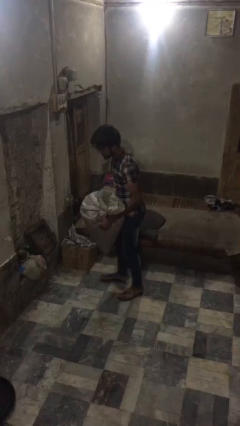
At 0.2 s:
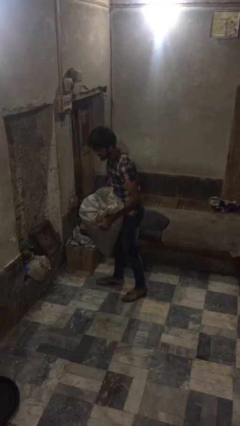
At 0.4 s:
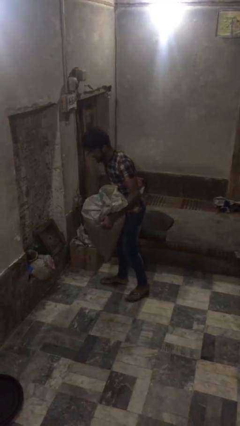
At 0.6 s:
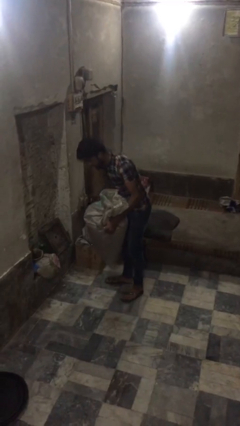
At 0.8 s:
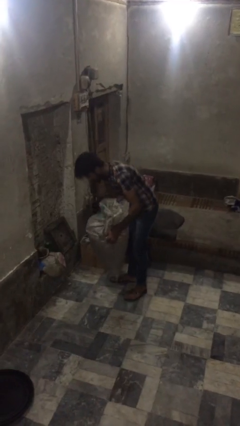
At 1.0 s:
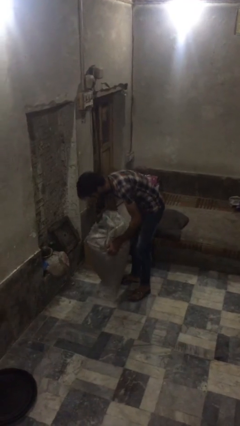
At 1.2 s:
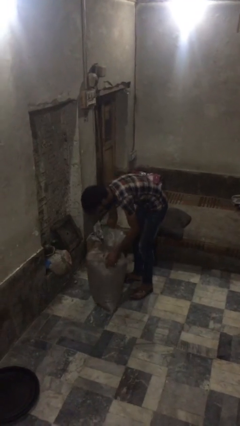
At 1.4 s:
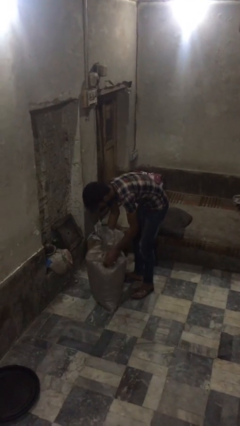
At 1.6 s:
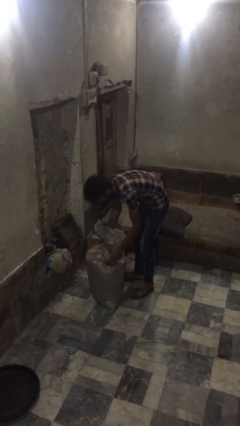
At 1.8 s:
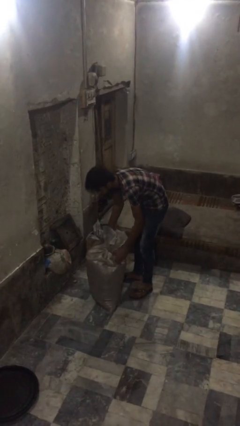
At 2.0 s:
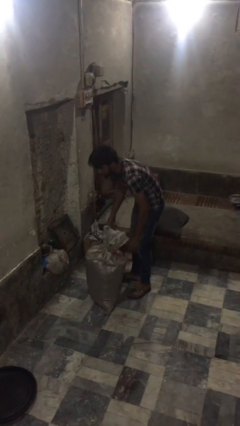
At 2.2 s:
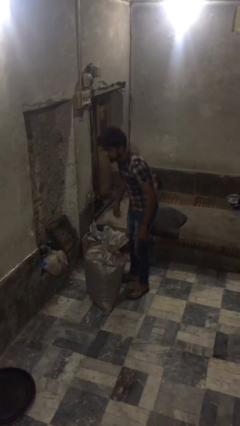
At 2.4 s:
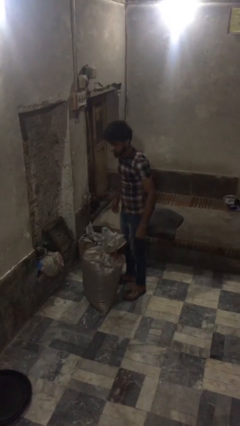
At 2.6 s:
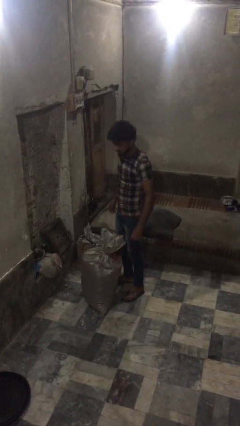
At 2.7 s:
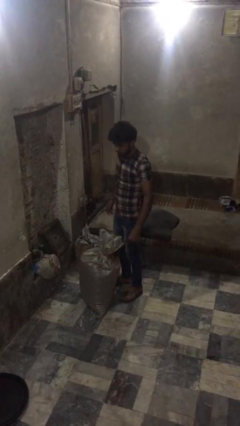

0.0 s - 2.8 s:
person puts down object on floor

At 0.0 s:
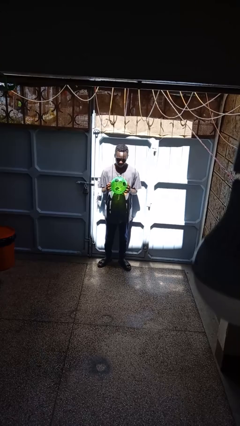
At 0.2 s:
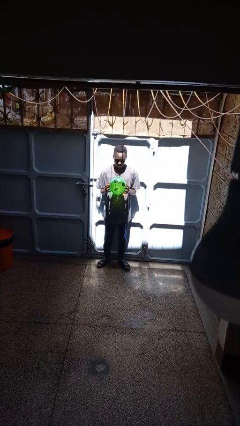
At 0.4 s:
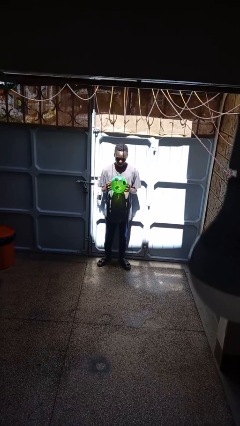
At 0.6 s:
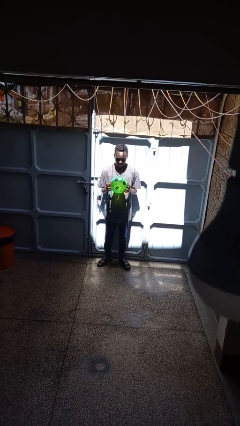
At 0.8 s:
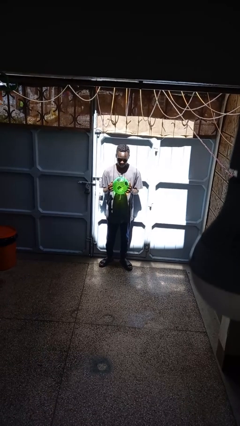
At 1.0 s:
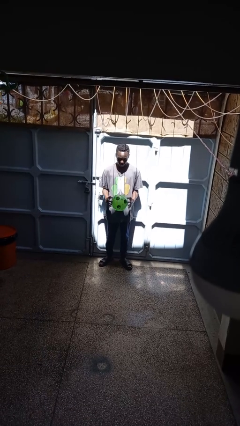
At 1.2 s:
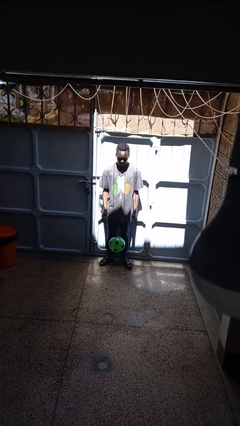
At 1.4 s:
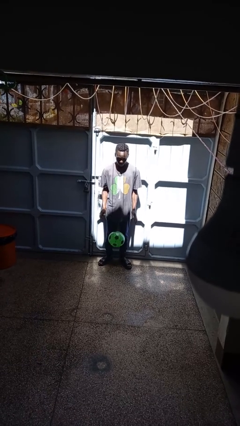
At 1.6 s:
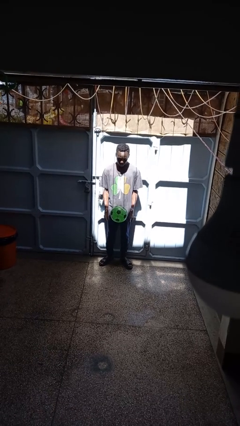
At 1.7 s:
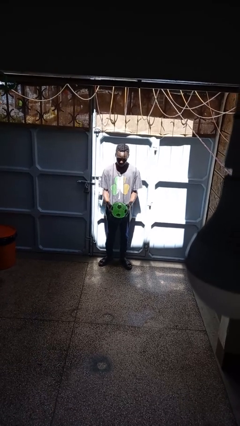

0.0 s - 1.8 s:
person bounces ball on floor

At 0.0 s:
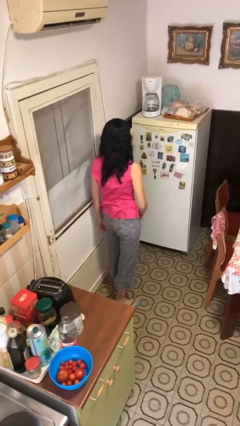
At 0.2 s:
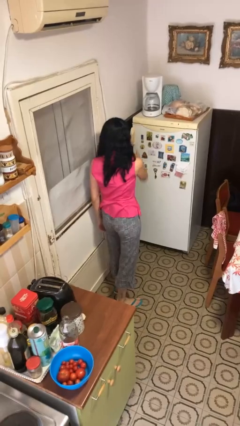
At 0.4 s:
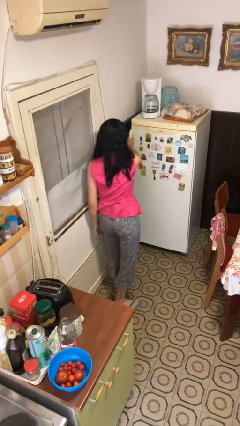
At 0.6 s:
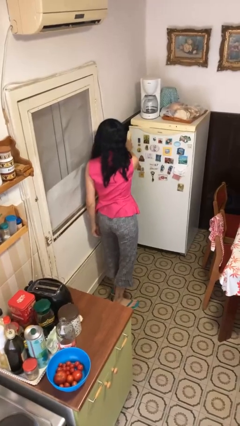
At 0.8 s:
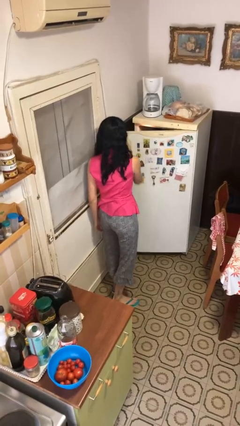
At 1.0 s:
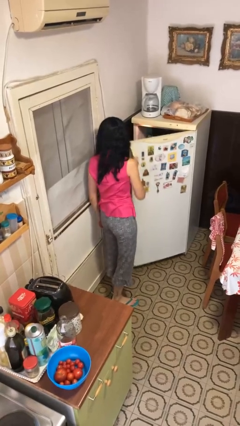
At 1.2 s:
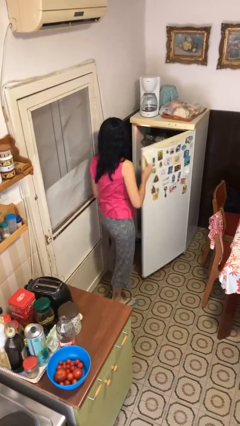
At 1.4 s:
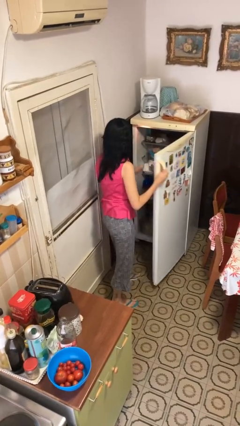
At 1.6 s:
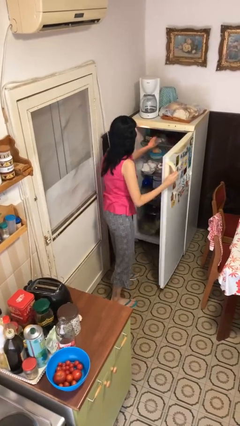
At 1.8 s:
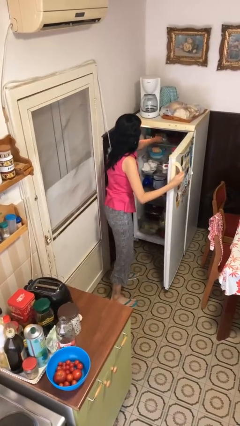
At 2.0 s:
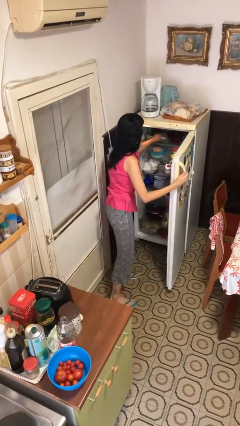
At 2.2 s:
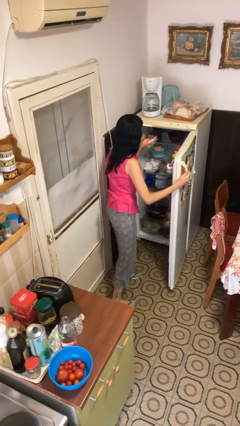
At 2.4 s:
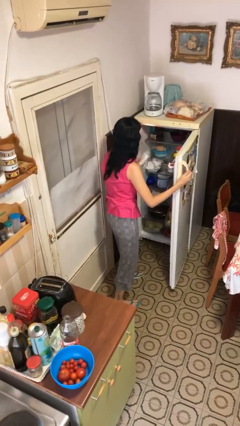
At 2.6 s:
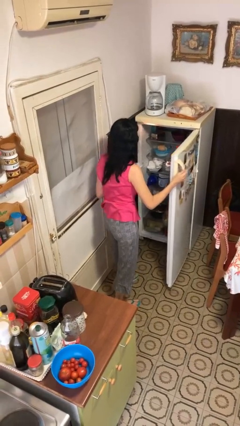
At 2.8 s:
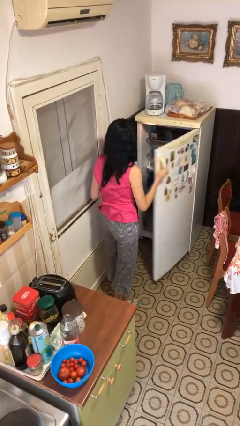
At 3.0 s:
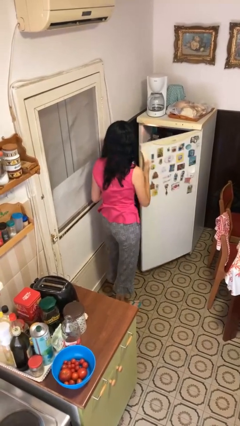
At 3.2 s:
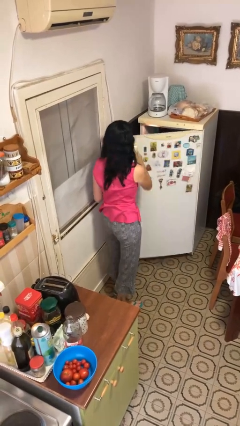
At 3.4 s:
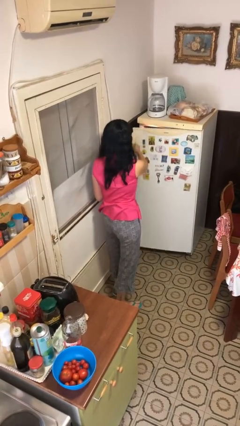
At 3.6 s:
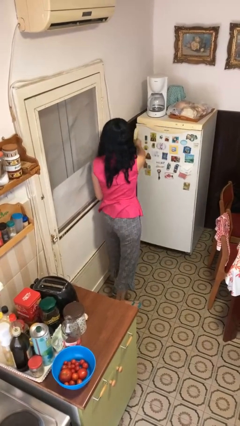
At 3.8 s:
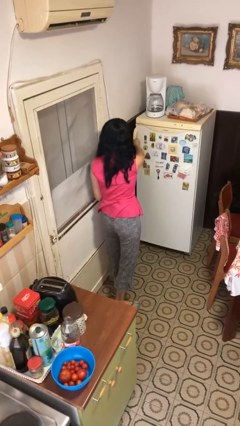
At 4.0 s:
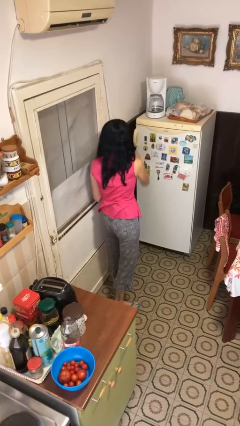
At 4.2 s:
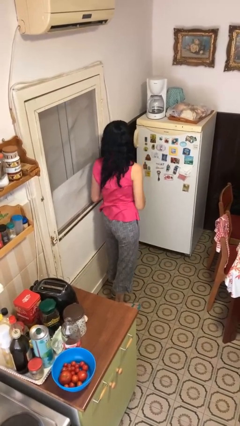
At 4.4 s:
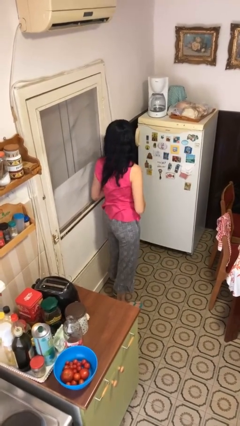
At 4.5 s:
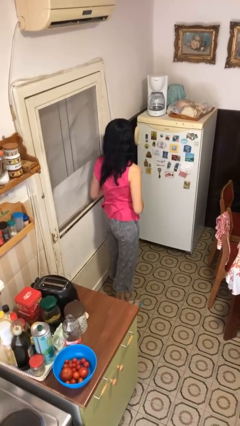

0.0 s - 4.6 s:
person takes object from refrigerator

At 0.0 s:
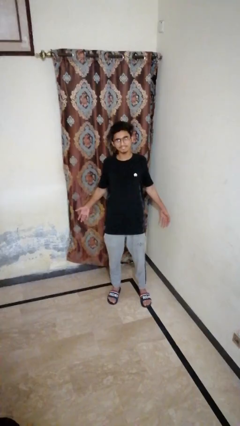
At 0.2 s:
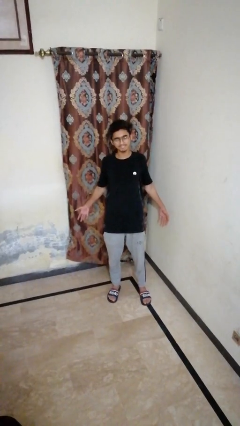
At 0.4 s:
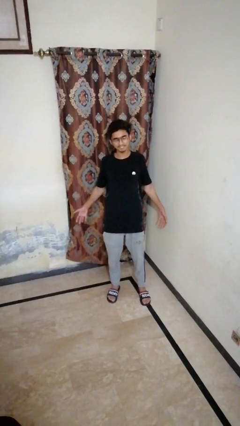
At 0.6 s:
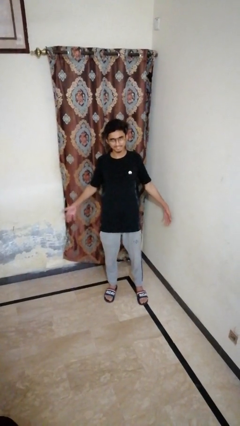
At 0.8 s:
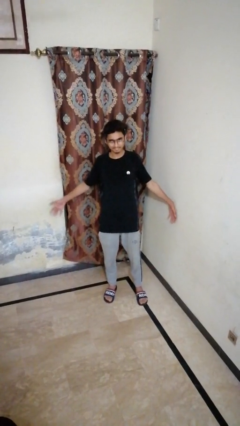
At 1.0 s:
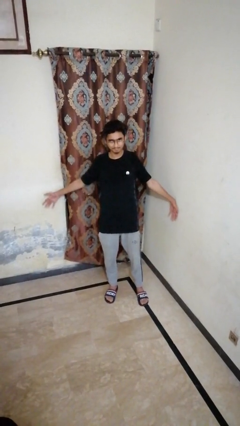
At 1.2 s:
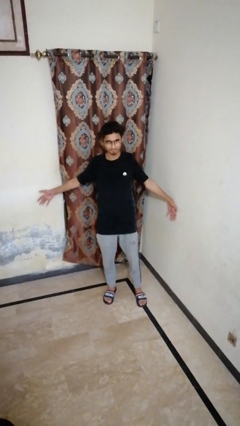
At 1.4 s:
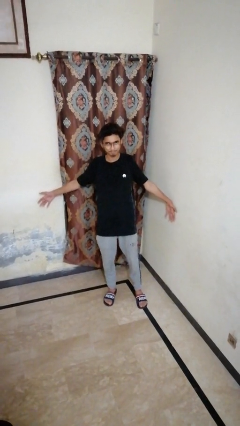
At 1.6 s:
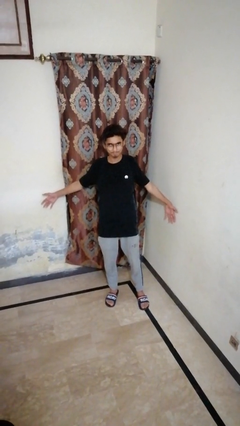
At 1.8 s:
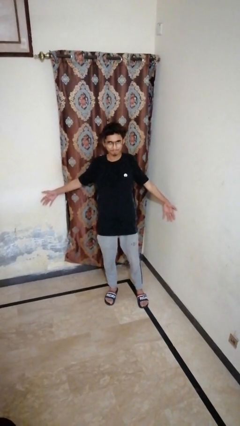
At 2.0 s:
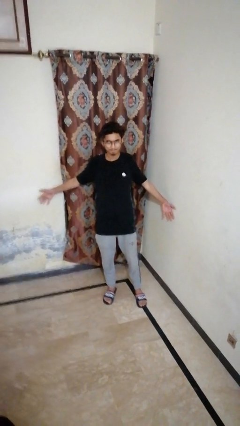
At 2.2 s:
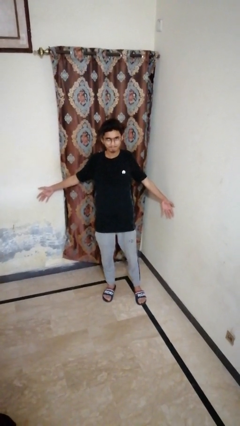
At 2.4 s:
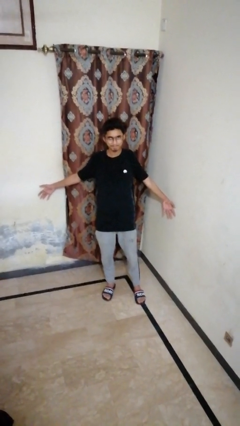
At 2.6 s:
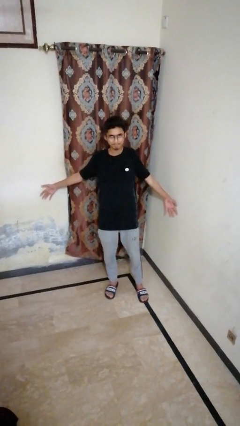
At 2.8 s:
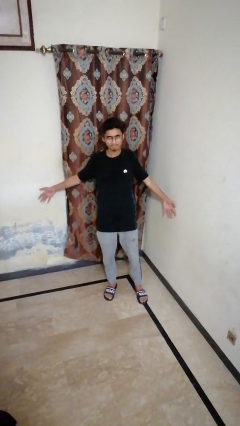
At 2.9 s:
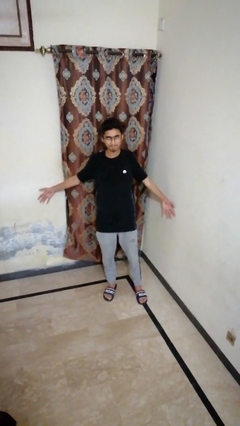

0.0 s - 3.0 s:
person stretches arms to side

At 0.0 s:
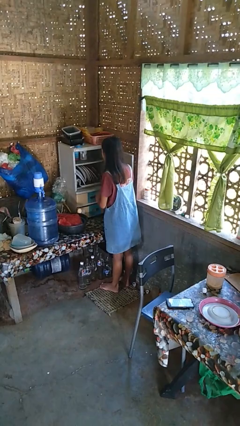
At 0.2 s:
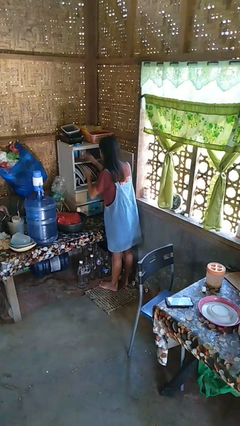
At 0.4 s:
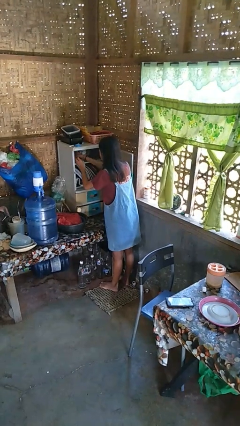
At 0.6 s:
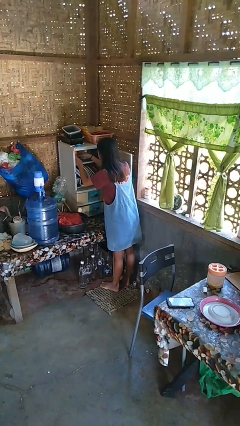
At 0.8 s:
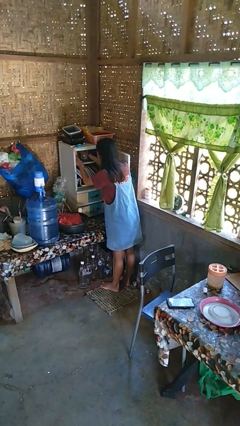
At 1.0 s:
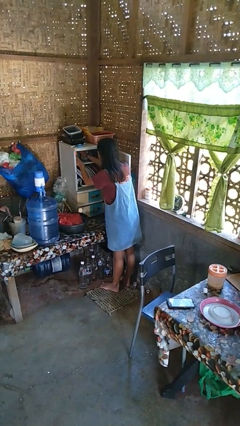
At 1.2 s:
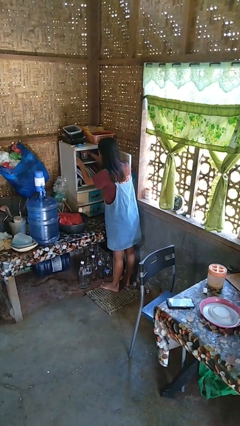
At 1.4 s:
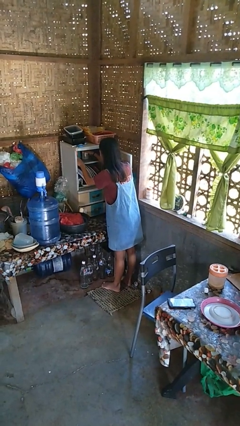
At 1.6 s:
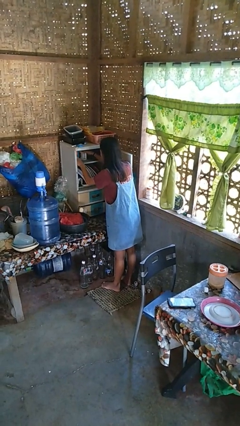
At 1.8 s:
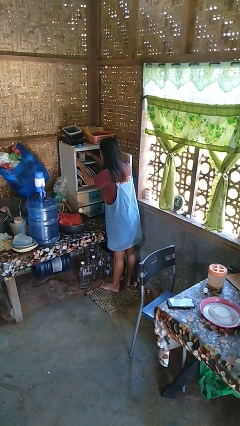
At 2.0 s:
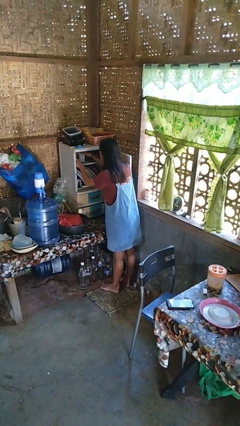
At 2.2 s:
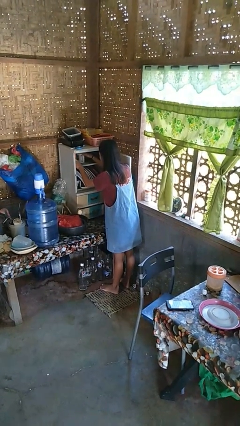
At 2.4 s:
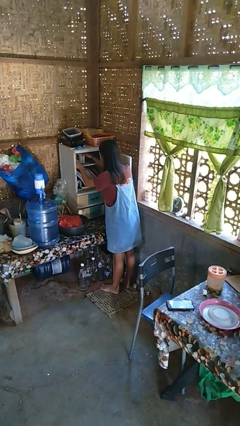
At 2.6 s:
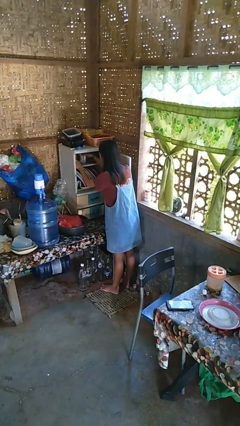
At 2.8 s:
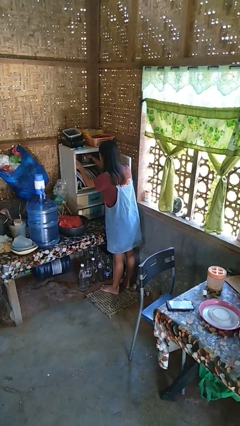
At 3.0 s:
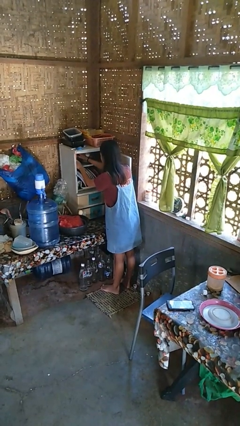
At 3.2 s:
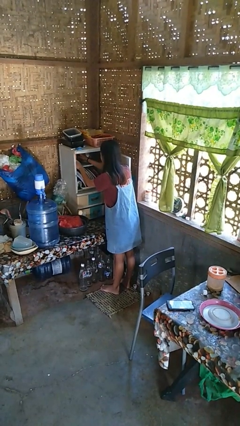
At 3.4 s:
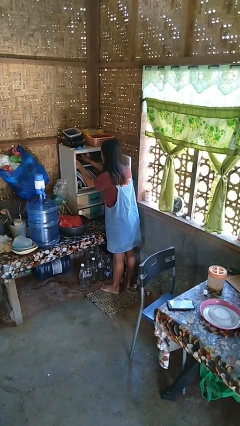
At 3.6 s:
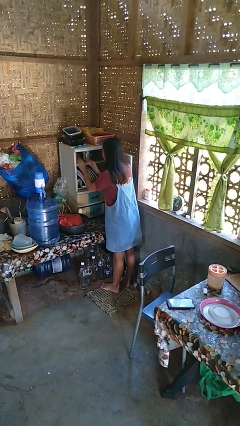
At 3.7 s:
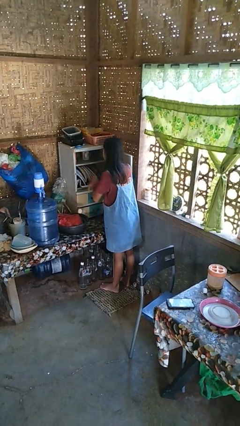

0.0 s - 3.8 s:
person searches in cabinet

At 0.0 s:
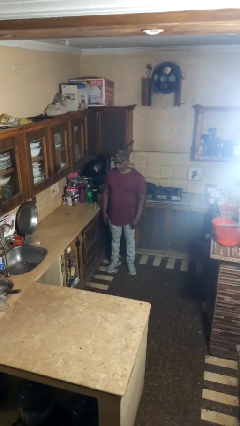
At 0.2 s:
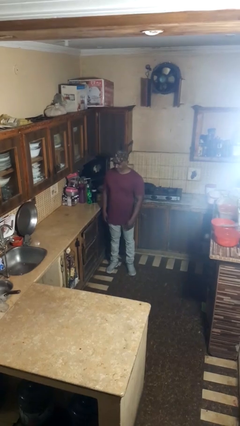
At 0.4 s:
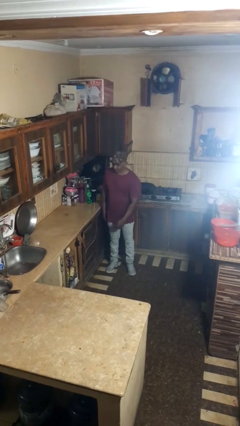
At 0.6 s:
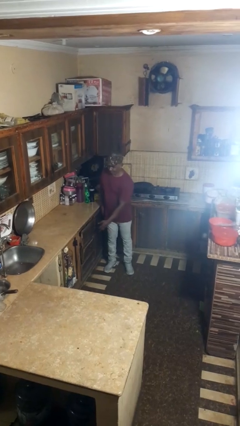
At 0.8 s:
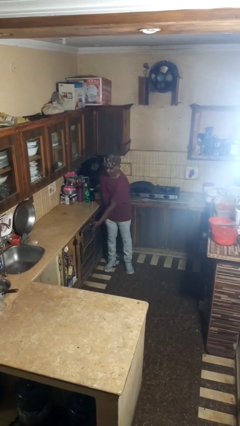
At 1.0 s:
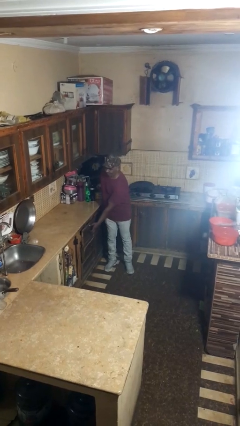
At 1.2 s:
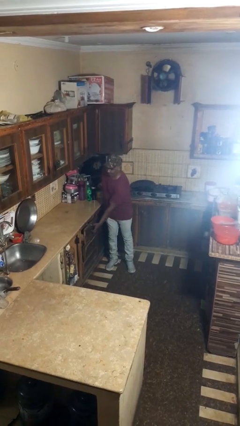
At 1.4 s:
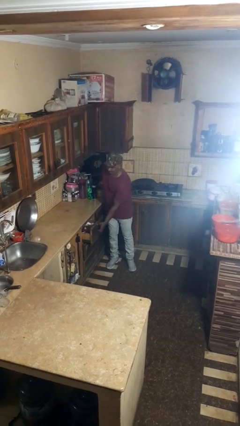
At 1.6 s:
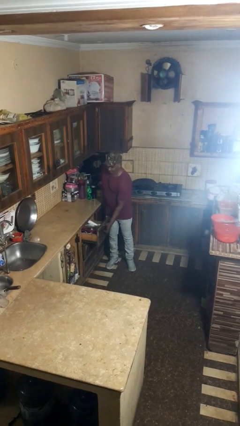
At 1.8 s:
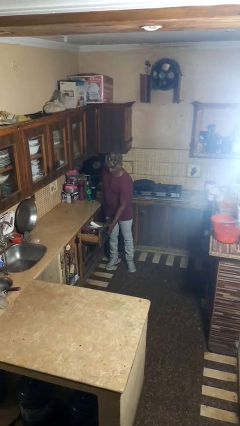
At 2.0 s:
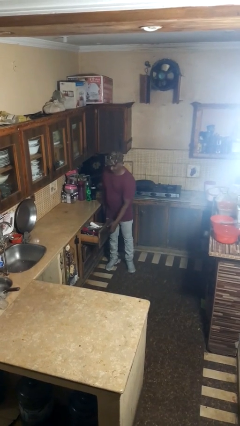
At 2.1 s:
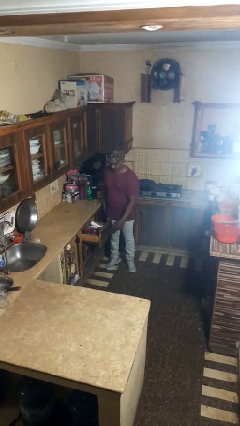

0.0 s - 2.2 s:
person opens kitchen drawer
